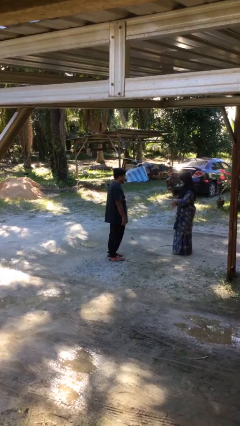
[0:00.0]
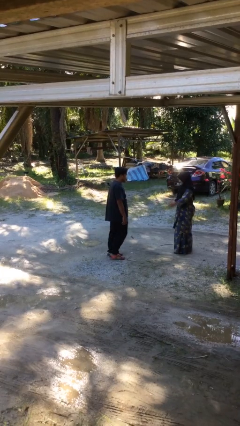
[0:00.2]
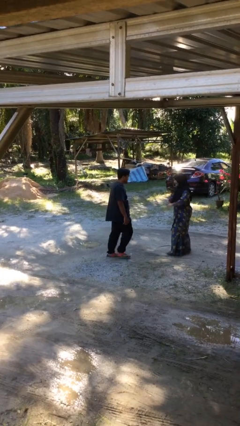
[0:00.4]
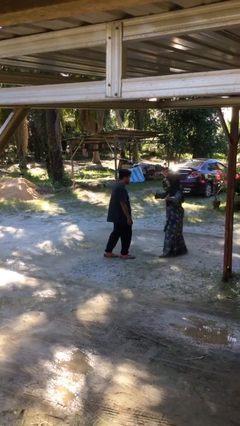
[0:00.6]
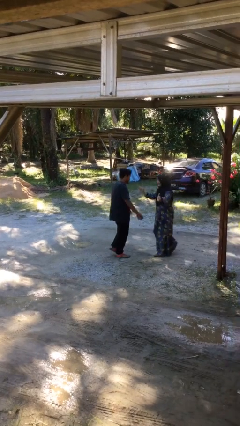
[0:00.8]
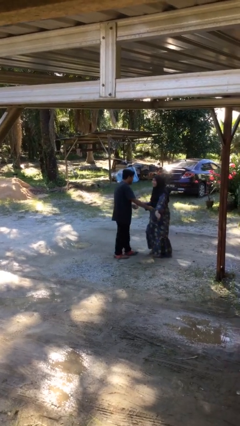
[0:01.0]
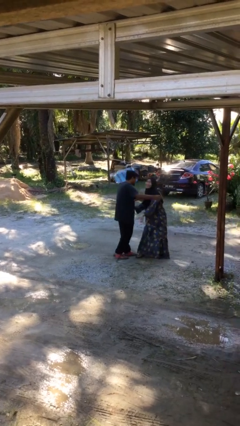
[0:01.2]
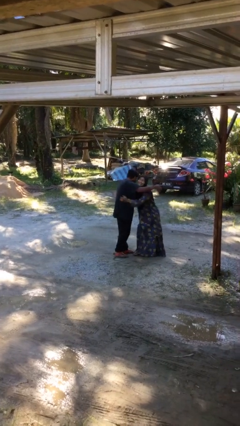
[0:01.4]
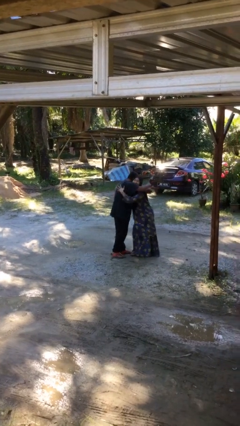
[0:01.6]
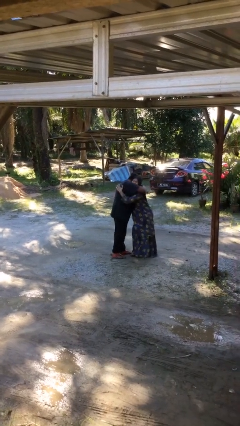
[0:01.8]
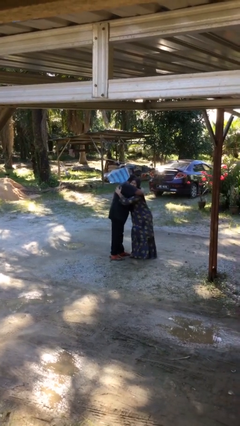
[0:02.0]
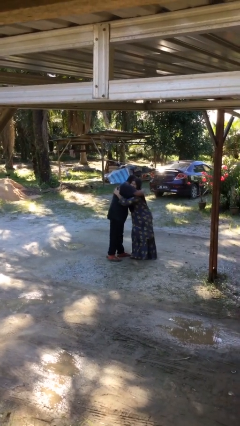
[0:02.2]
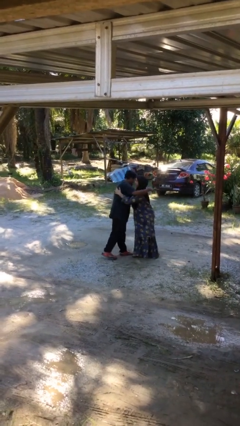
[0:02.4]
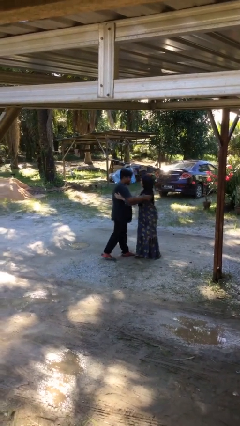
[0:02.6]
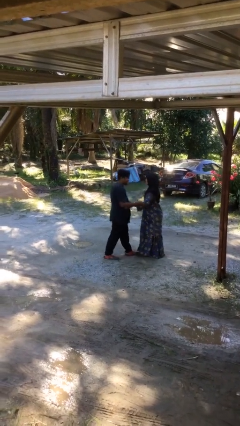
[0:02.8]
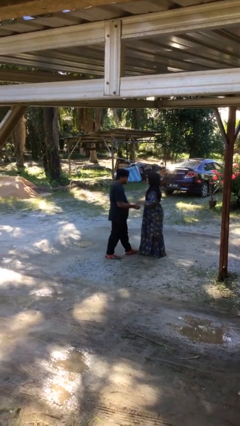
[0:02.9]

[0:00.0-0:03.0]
person embraces person

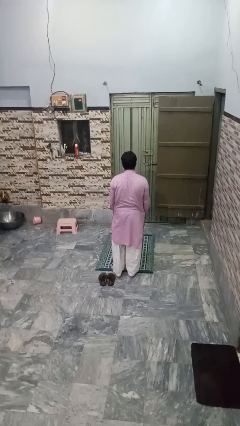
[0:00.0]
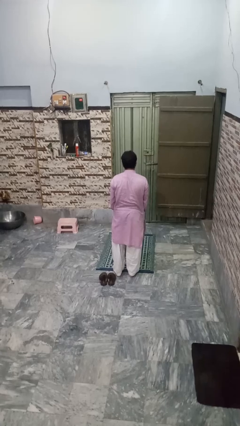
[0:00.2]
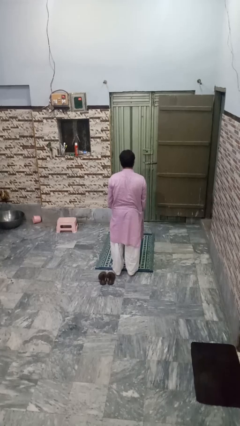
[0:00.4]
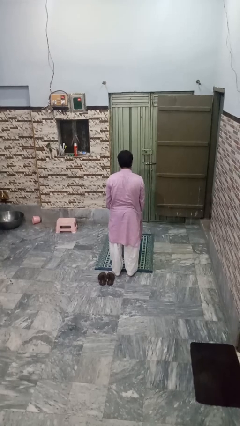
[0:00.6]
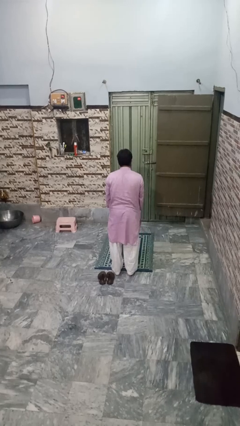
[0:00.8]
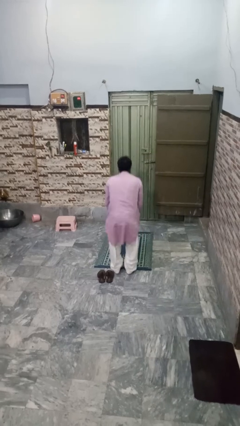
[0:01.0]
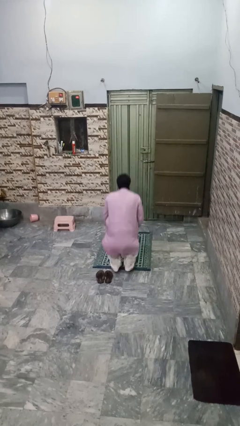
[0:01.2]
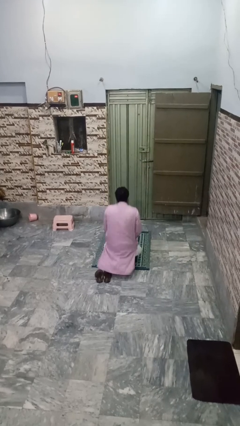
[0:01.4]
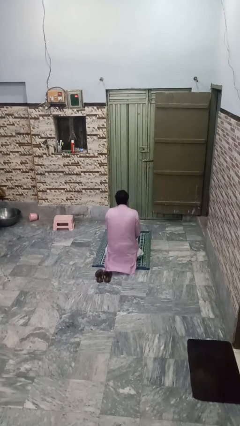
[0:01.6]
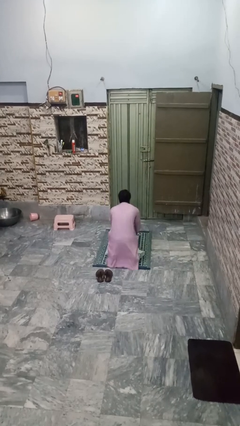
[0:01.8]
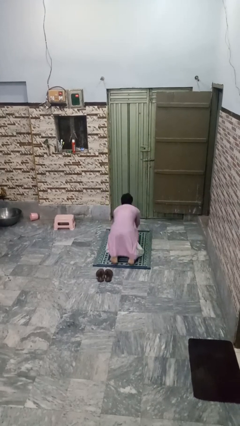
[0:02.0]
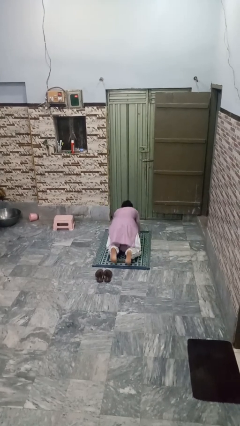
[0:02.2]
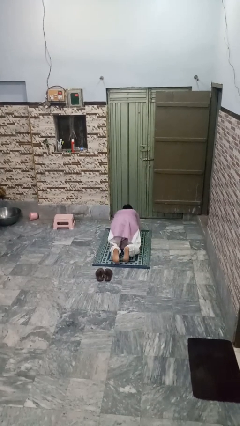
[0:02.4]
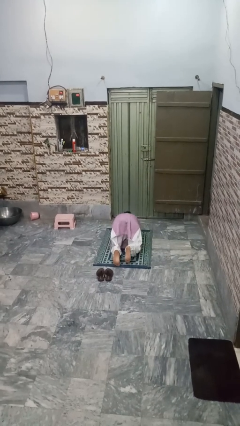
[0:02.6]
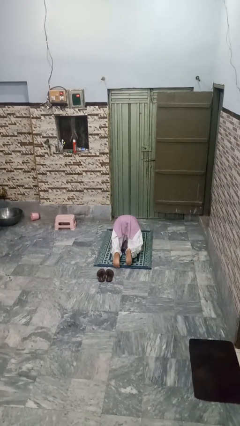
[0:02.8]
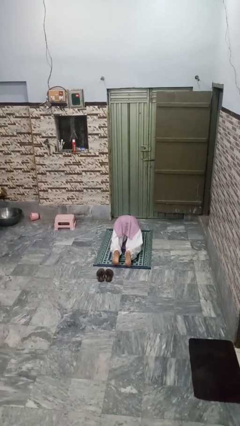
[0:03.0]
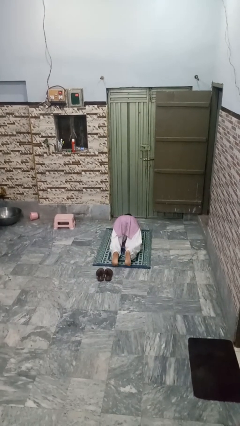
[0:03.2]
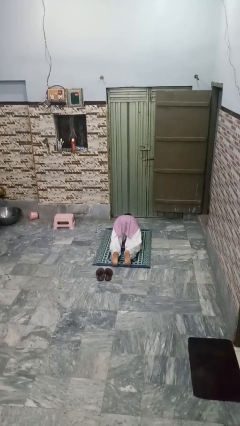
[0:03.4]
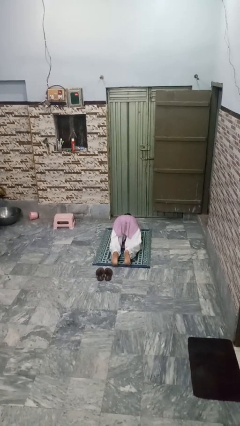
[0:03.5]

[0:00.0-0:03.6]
person exercises with plank

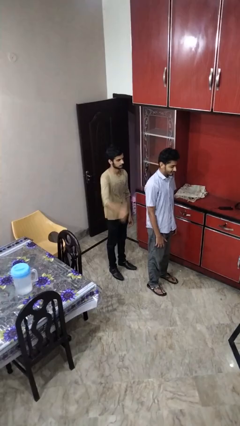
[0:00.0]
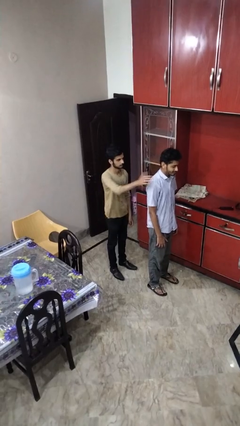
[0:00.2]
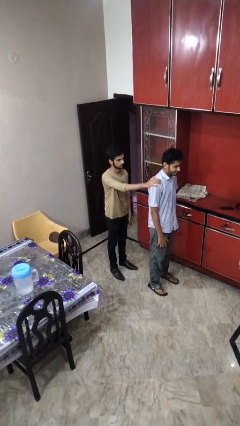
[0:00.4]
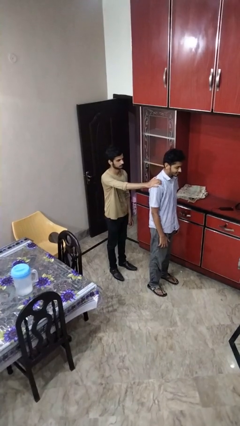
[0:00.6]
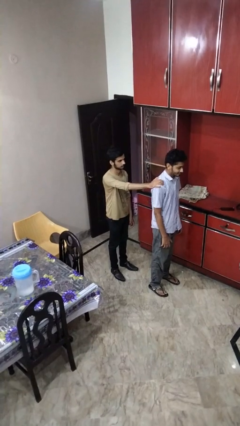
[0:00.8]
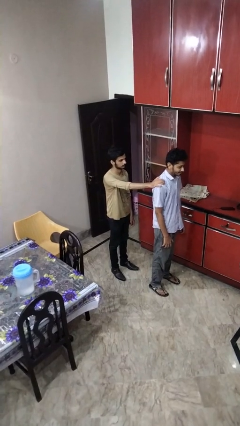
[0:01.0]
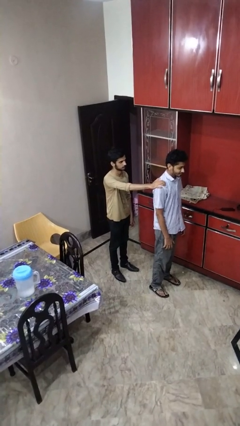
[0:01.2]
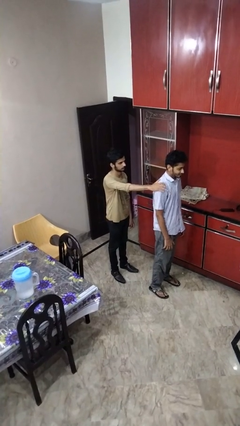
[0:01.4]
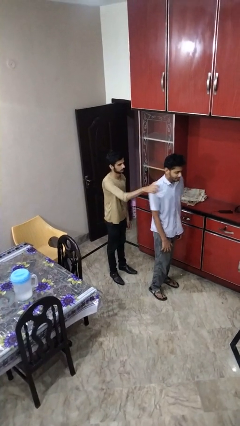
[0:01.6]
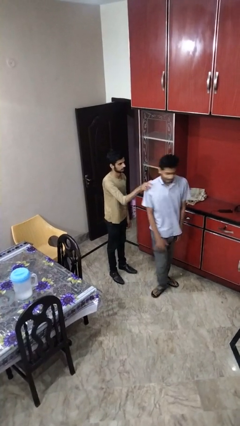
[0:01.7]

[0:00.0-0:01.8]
person grabs person by shoulder

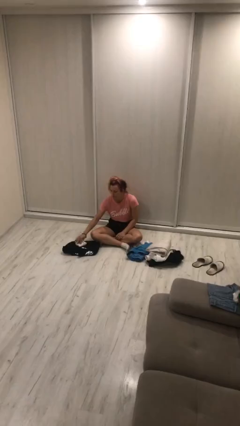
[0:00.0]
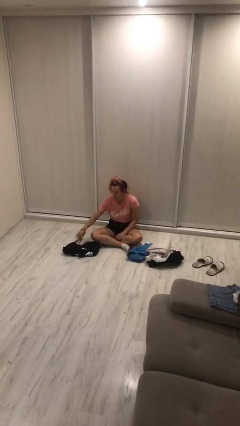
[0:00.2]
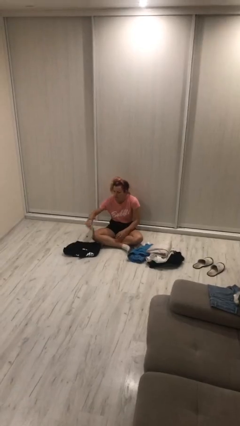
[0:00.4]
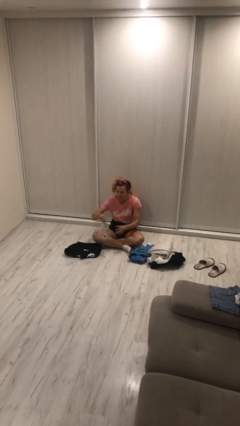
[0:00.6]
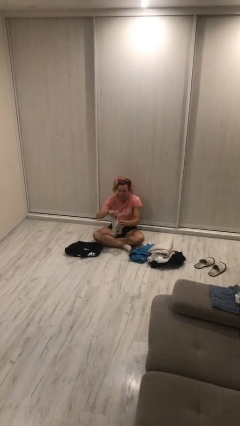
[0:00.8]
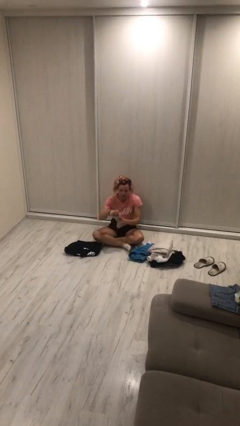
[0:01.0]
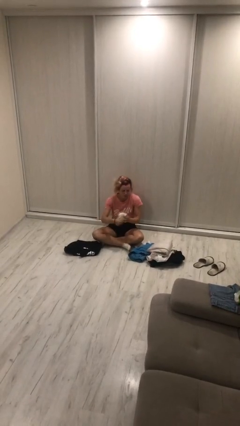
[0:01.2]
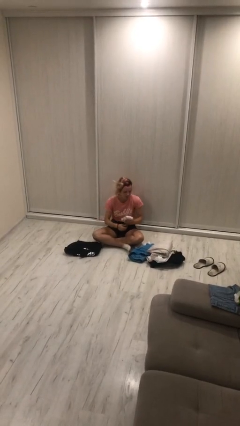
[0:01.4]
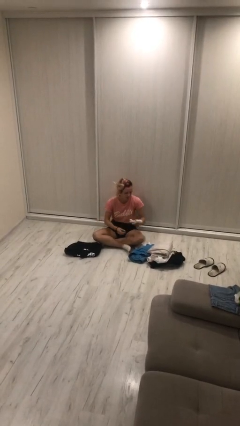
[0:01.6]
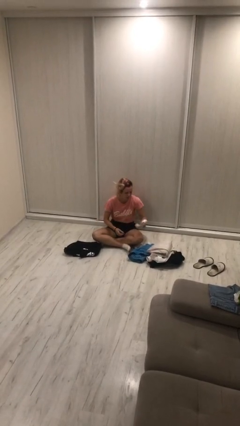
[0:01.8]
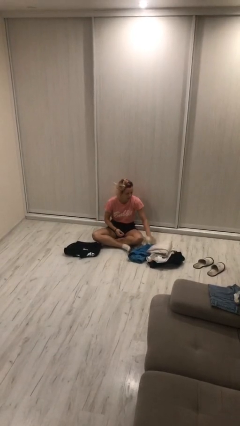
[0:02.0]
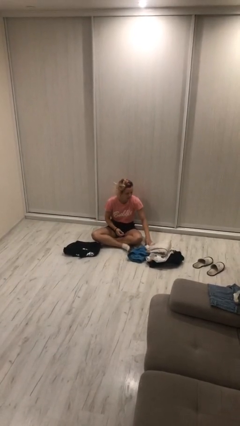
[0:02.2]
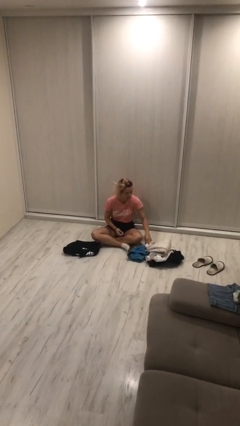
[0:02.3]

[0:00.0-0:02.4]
person folds socks

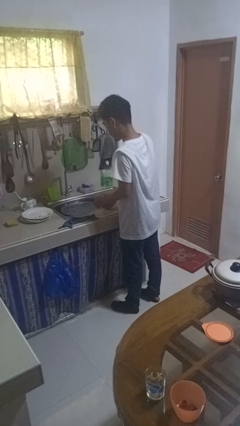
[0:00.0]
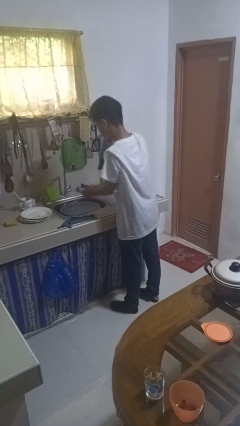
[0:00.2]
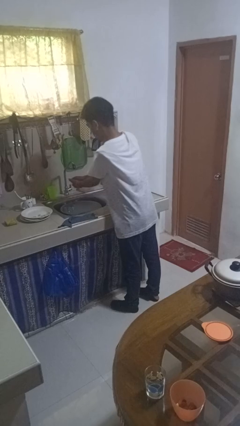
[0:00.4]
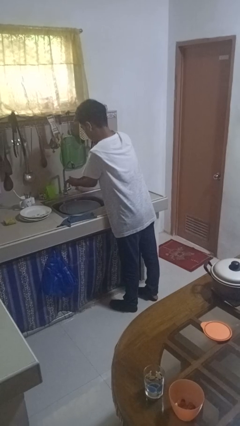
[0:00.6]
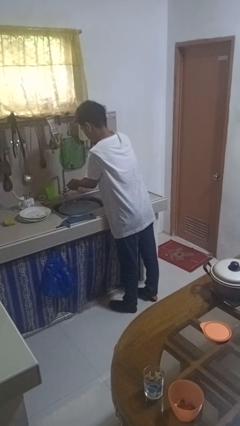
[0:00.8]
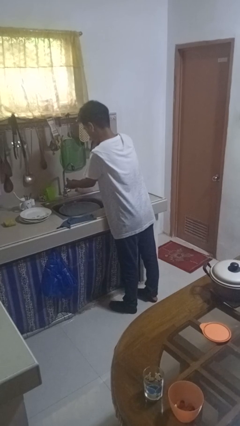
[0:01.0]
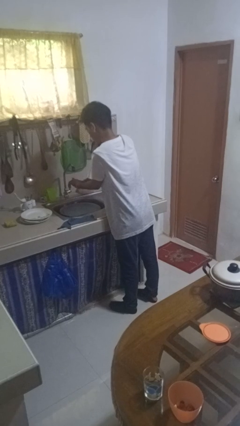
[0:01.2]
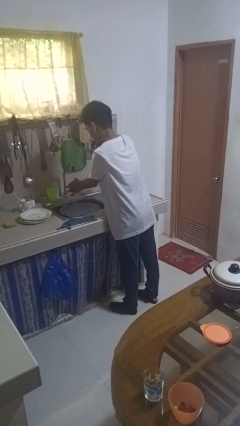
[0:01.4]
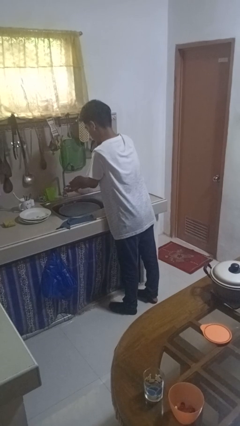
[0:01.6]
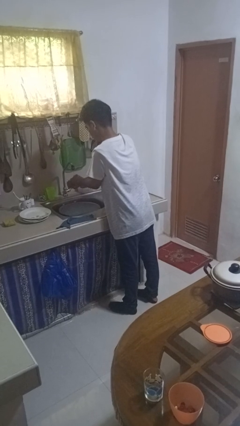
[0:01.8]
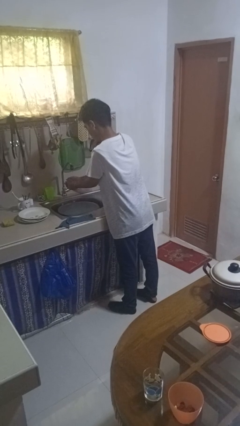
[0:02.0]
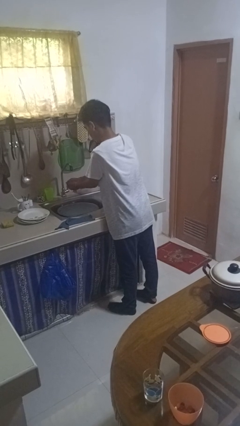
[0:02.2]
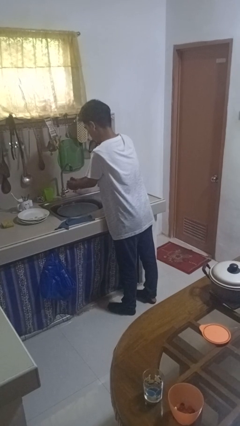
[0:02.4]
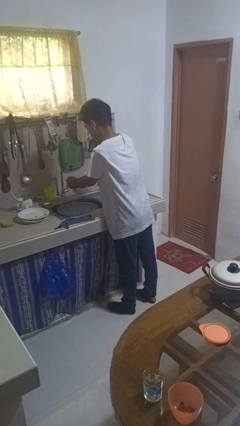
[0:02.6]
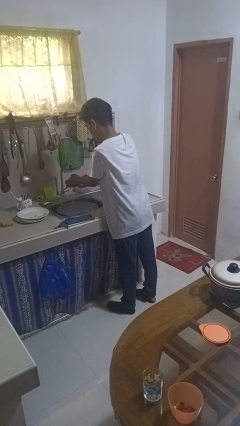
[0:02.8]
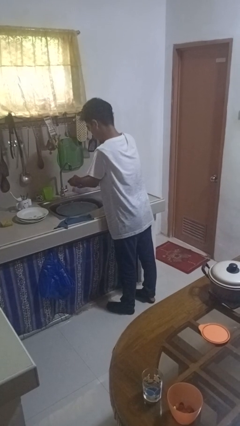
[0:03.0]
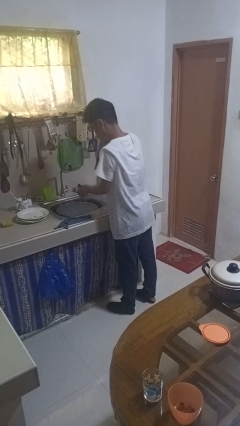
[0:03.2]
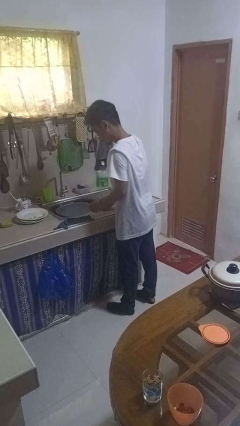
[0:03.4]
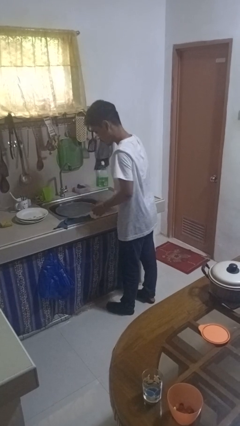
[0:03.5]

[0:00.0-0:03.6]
person washes hands

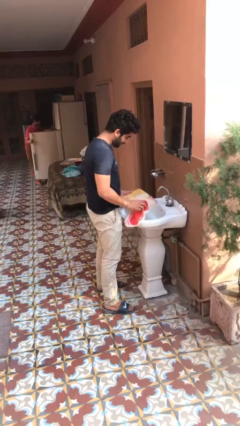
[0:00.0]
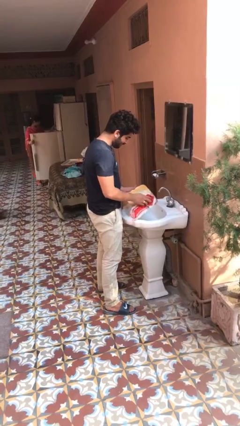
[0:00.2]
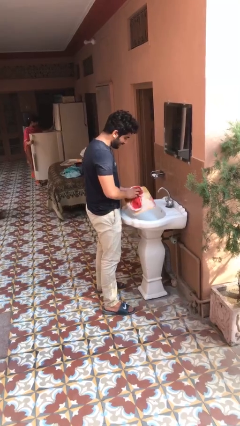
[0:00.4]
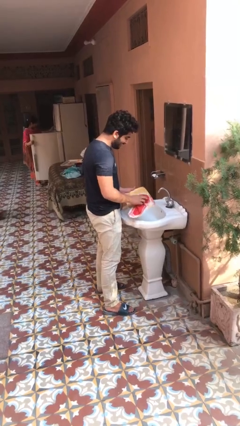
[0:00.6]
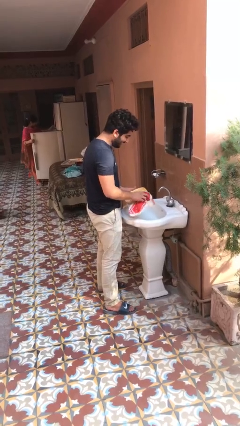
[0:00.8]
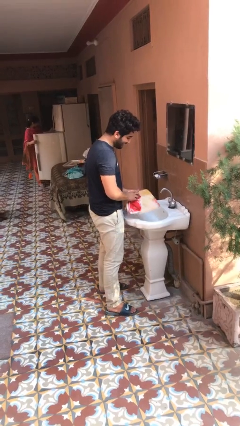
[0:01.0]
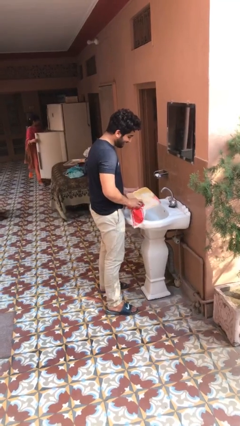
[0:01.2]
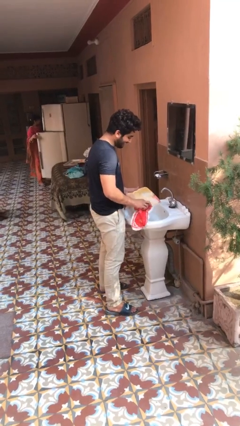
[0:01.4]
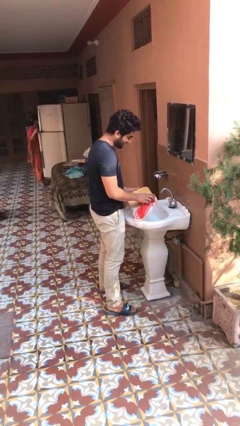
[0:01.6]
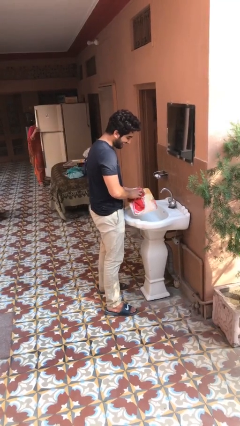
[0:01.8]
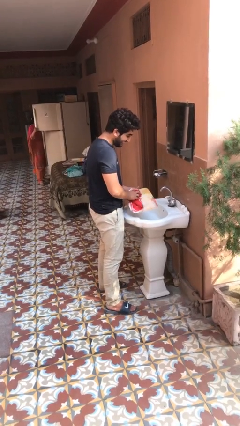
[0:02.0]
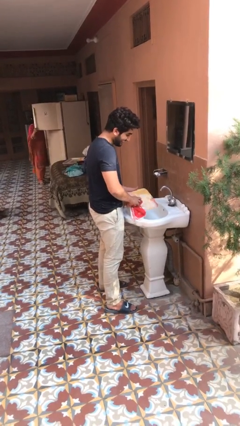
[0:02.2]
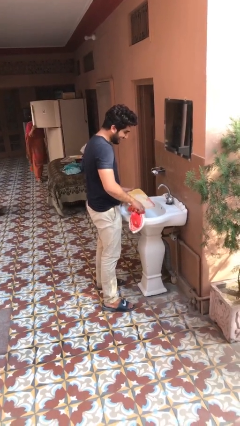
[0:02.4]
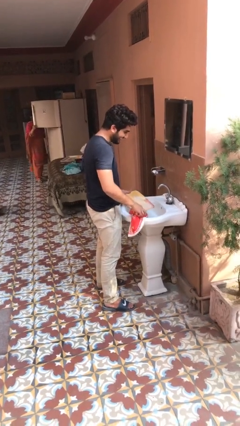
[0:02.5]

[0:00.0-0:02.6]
person dries dish

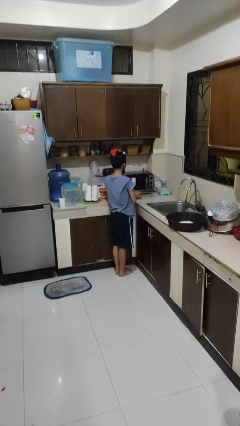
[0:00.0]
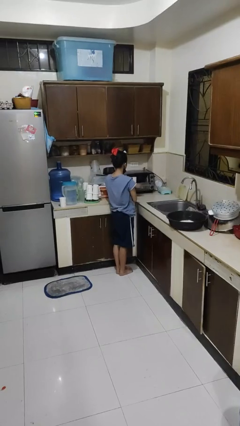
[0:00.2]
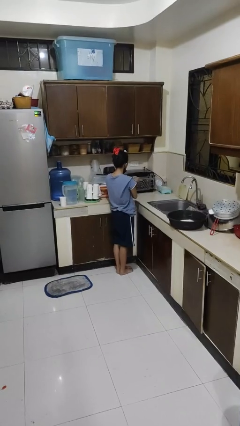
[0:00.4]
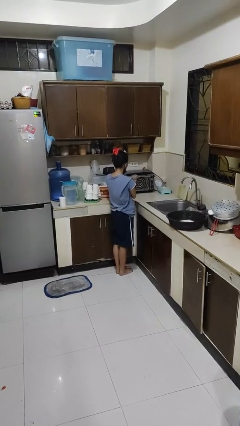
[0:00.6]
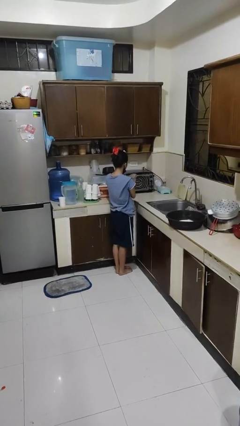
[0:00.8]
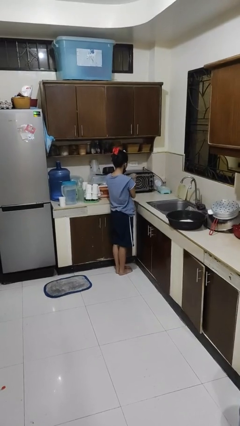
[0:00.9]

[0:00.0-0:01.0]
person closes microwave
